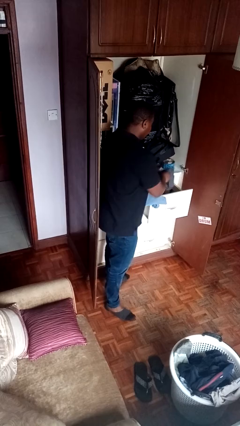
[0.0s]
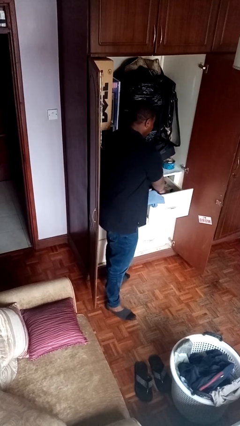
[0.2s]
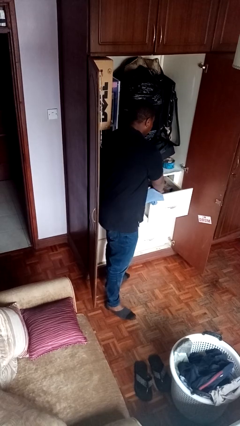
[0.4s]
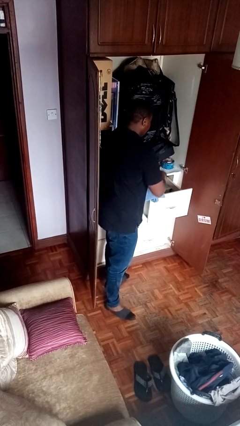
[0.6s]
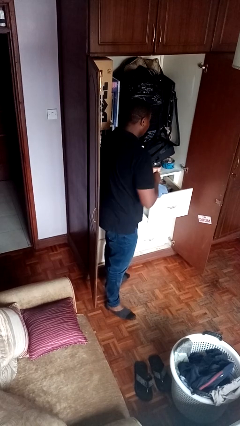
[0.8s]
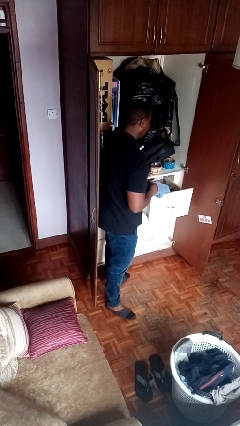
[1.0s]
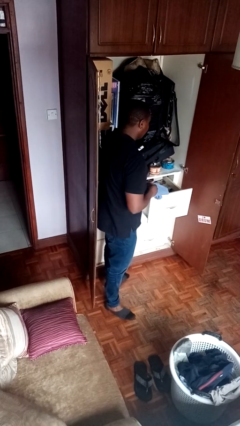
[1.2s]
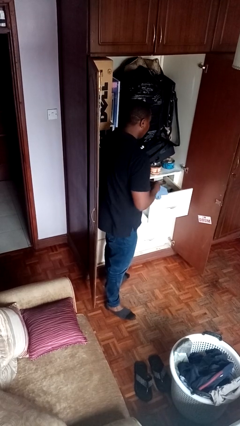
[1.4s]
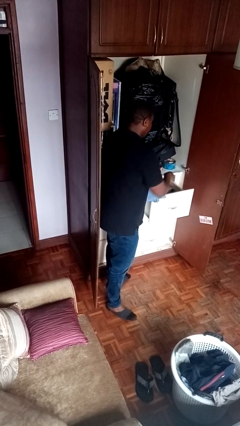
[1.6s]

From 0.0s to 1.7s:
person puts clothes into dresser

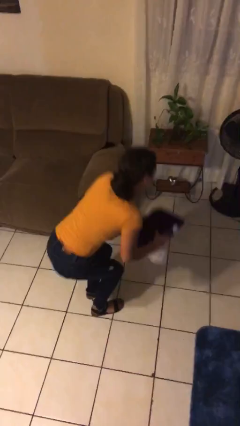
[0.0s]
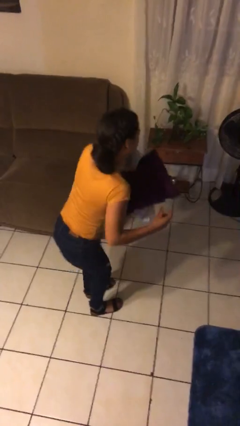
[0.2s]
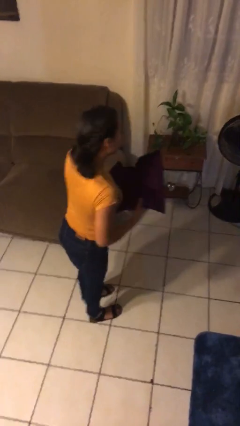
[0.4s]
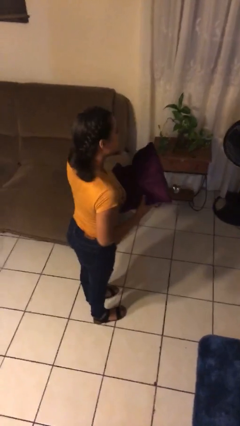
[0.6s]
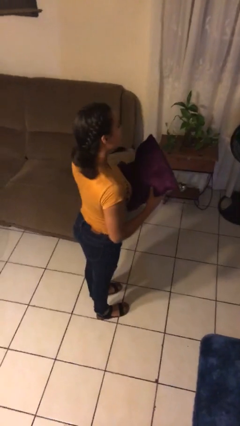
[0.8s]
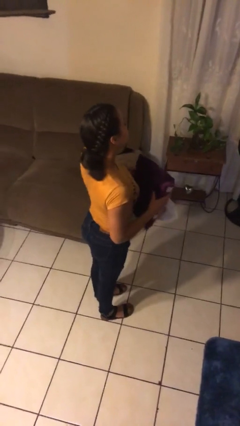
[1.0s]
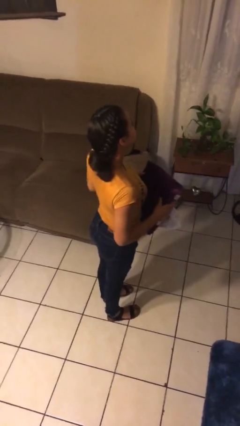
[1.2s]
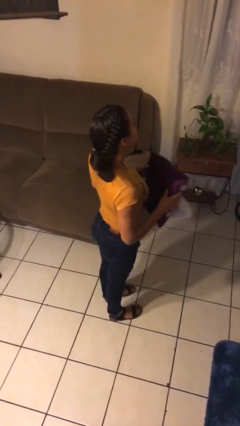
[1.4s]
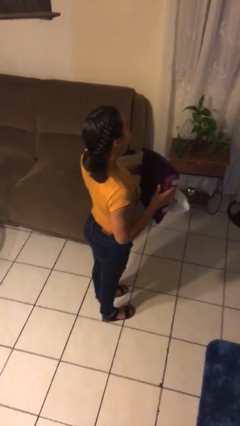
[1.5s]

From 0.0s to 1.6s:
person picks up object from floor

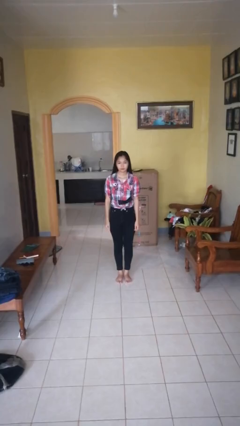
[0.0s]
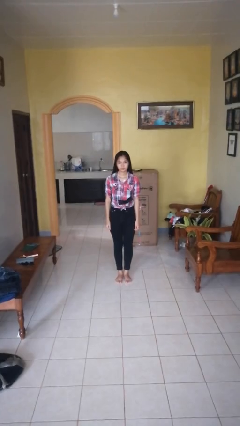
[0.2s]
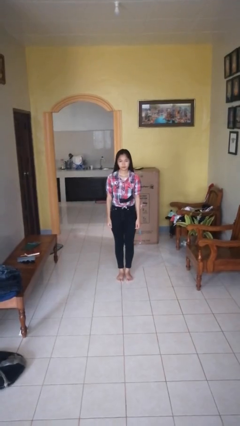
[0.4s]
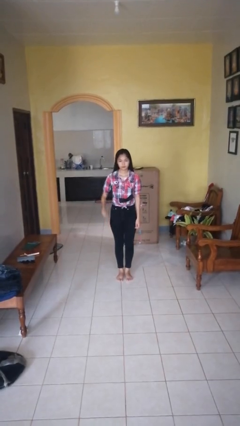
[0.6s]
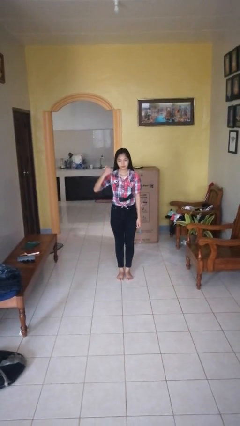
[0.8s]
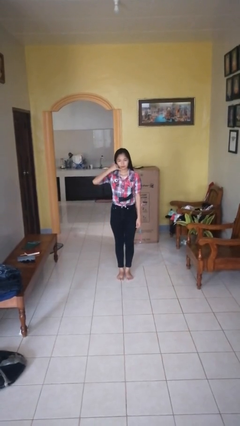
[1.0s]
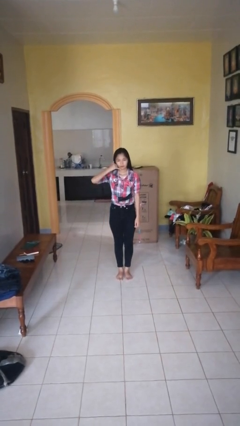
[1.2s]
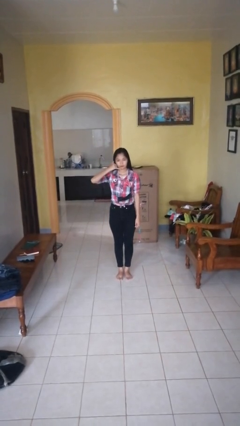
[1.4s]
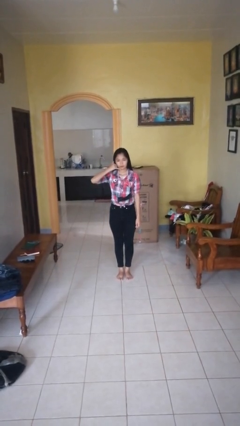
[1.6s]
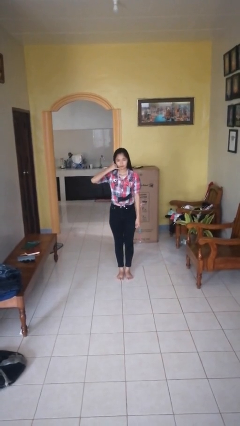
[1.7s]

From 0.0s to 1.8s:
person gestures call me

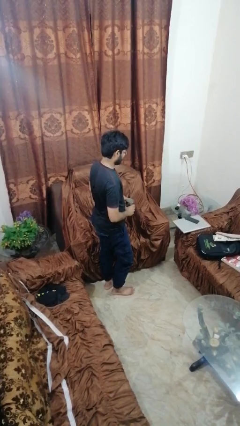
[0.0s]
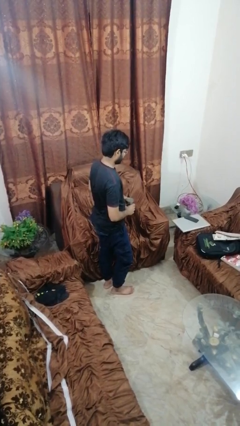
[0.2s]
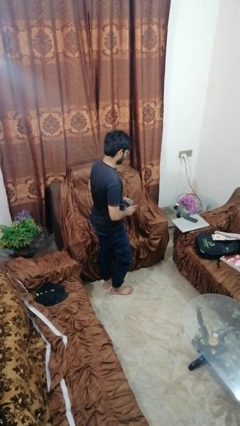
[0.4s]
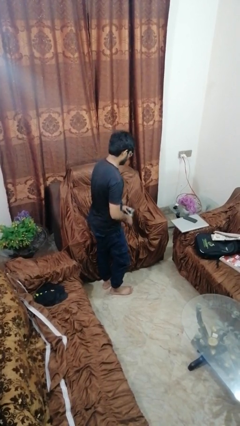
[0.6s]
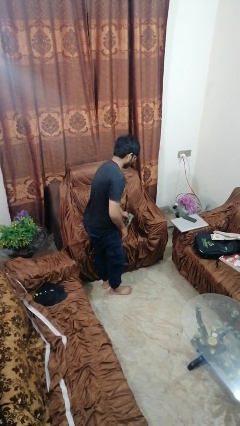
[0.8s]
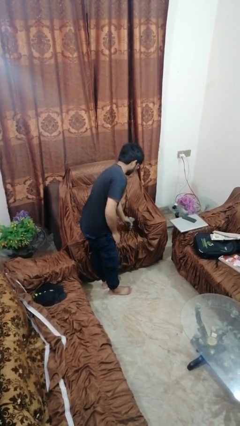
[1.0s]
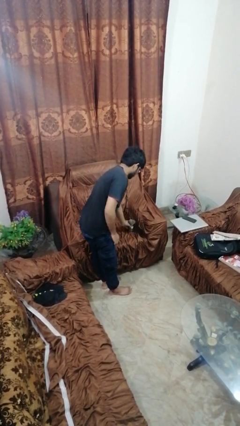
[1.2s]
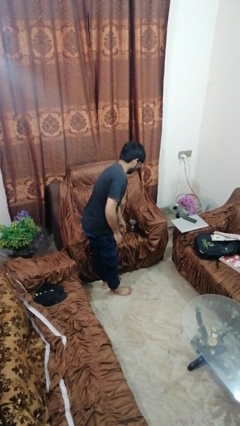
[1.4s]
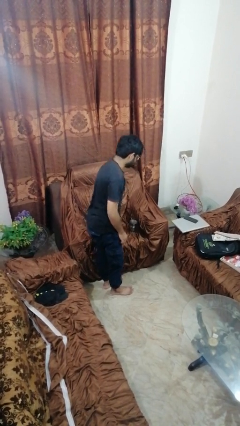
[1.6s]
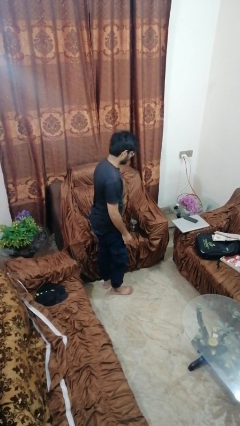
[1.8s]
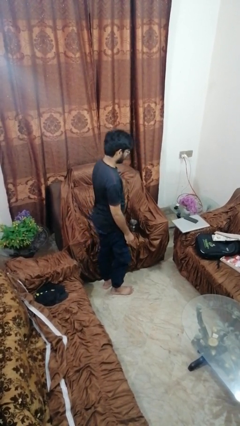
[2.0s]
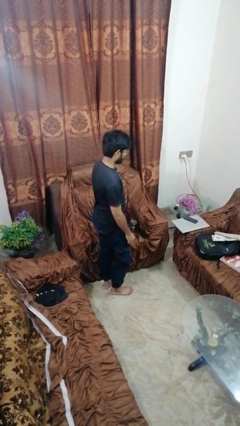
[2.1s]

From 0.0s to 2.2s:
person puts down object on couch

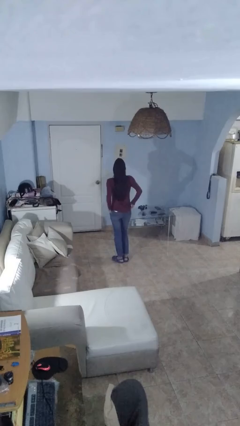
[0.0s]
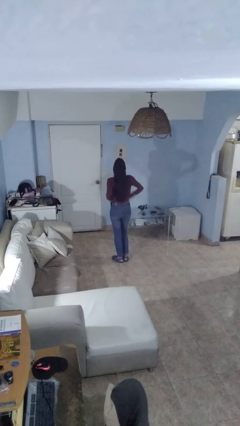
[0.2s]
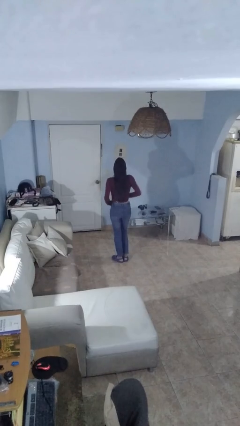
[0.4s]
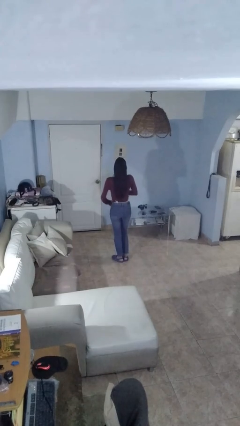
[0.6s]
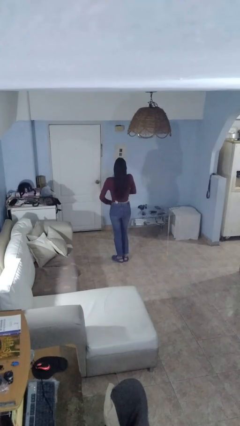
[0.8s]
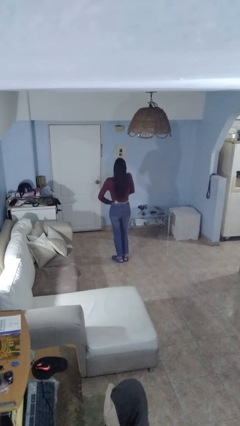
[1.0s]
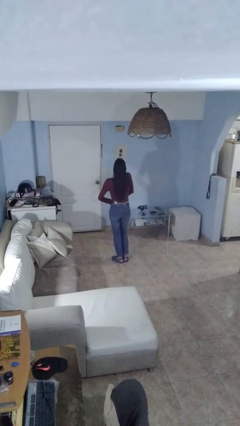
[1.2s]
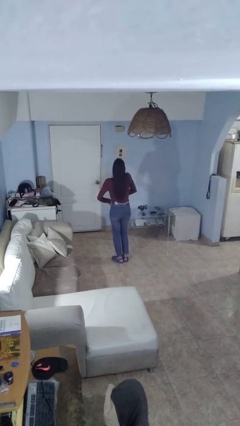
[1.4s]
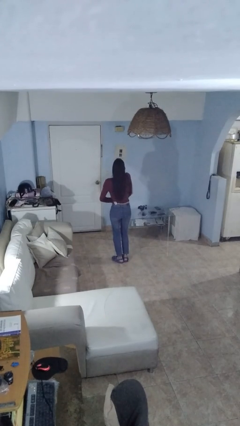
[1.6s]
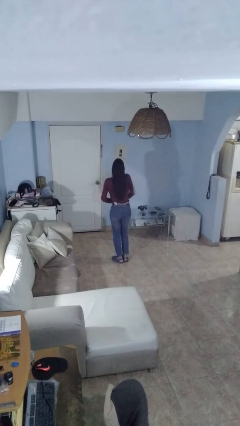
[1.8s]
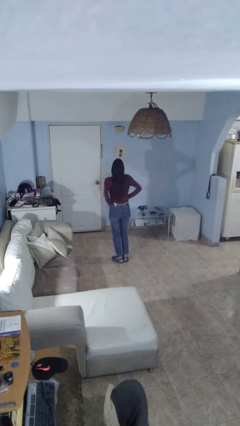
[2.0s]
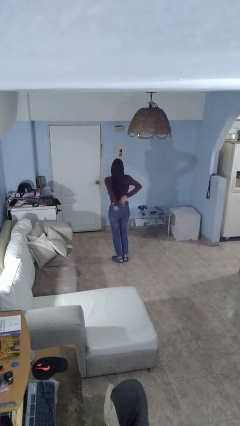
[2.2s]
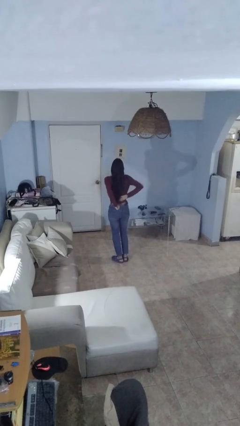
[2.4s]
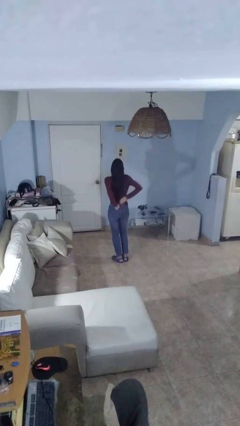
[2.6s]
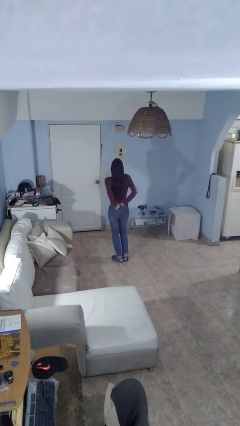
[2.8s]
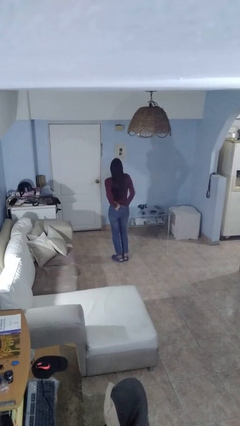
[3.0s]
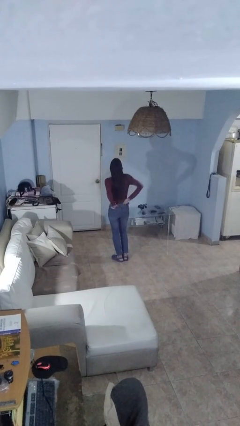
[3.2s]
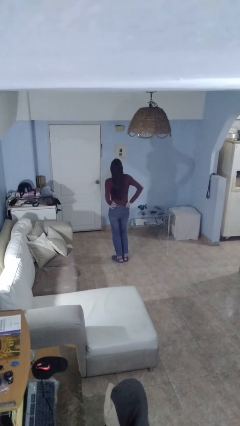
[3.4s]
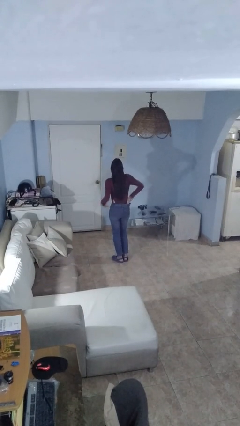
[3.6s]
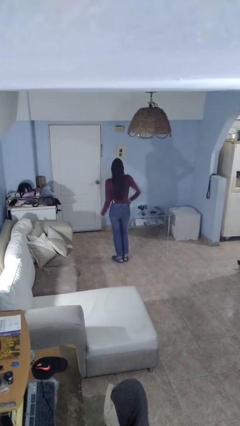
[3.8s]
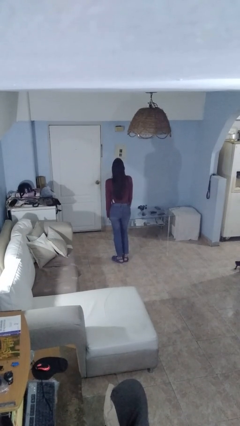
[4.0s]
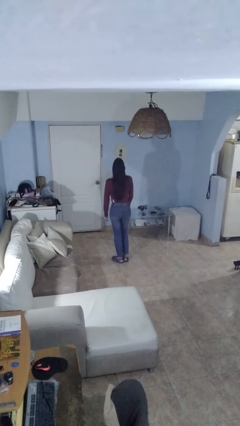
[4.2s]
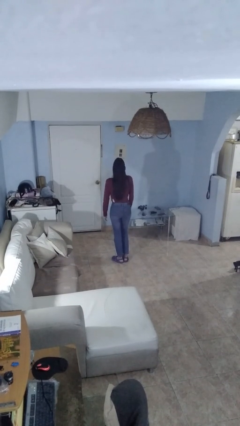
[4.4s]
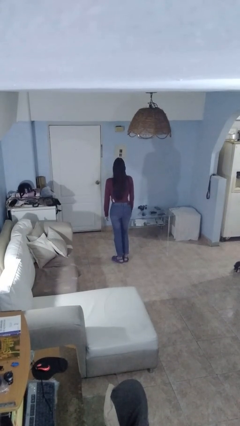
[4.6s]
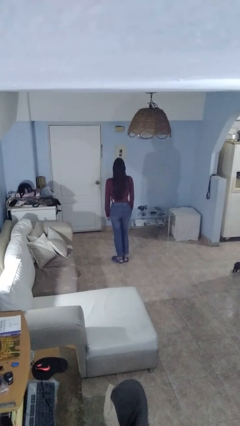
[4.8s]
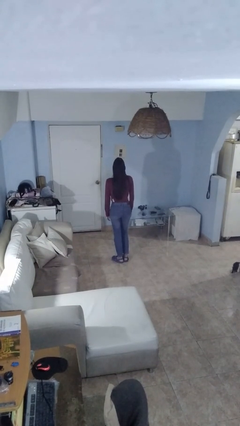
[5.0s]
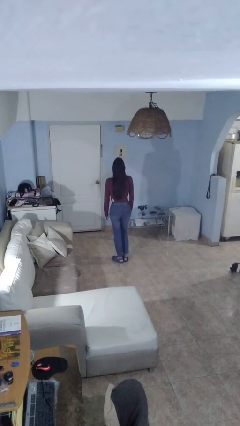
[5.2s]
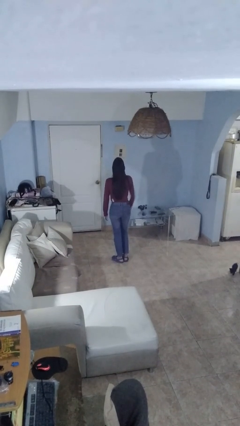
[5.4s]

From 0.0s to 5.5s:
person tucks in shirt

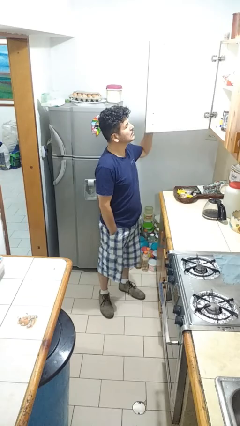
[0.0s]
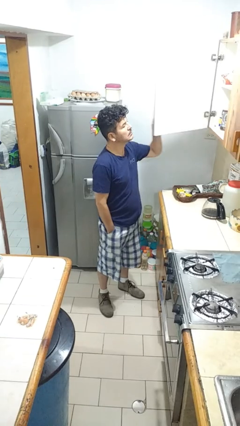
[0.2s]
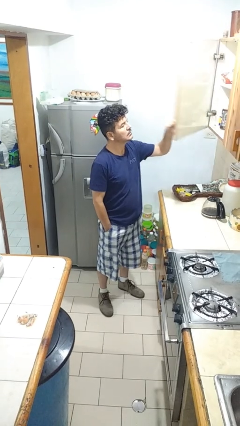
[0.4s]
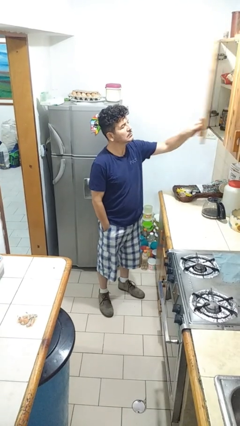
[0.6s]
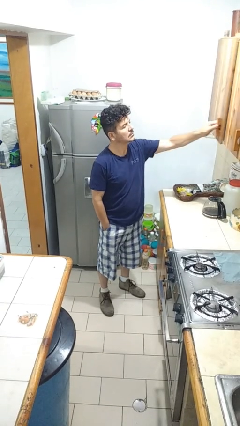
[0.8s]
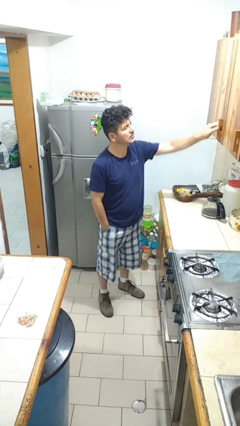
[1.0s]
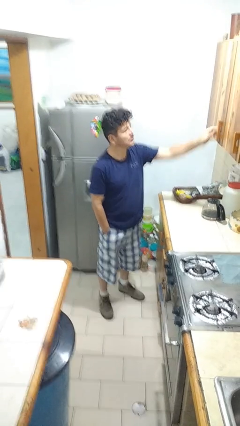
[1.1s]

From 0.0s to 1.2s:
person closes cabinet

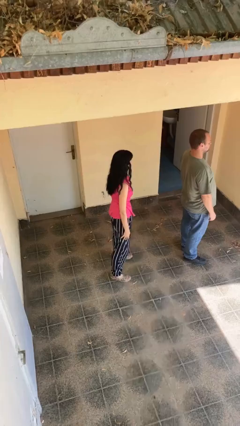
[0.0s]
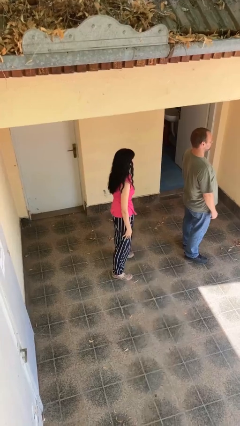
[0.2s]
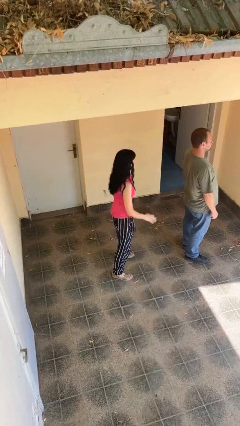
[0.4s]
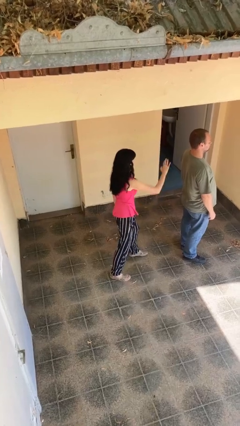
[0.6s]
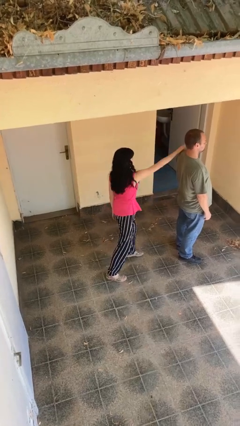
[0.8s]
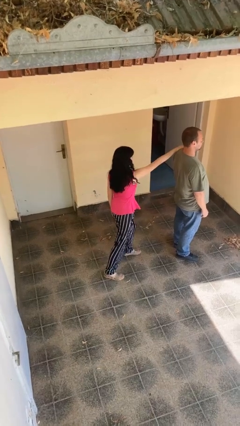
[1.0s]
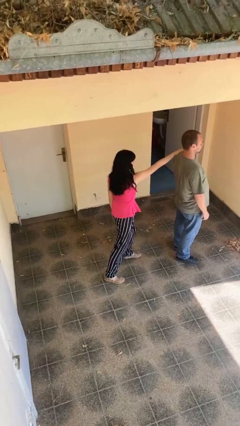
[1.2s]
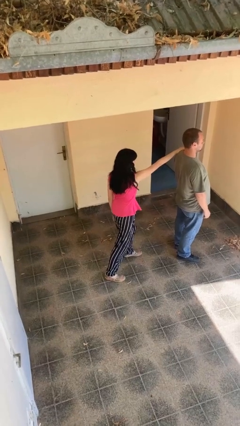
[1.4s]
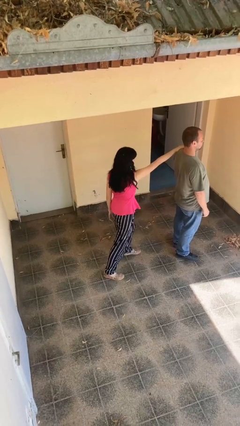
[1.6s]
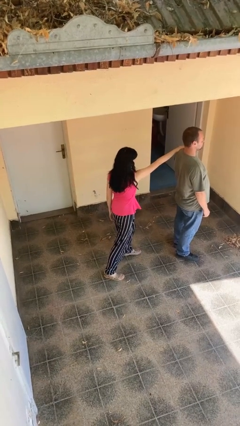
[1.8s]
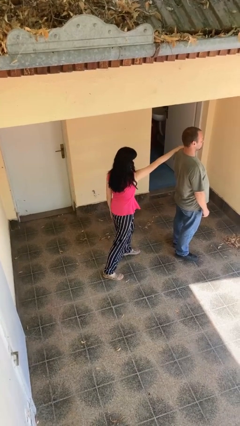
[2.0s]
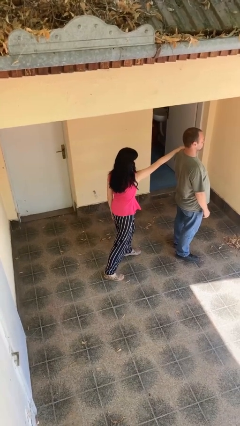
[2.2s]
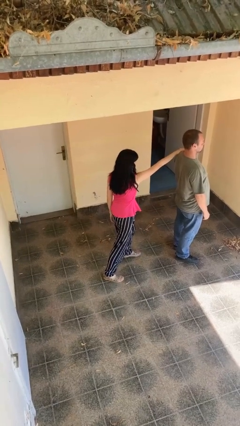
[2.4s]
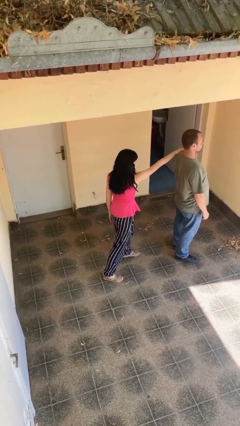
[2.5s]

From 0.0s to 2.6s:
person grabs person by shoulder

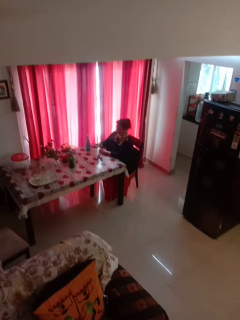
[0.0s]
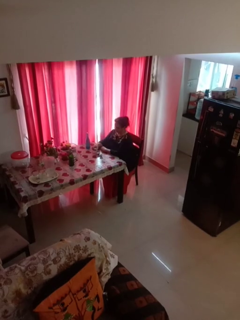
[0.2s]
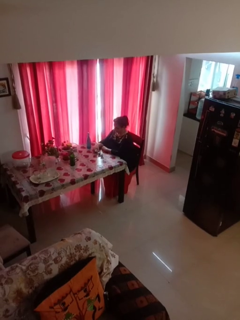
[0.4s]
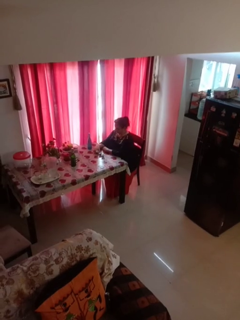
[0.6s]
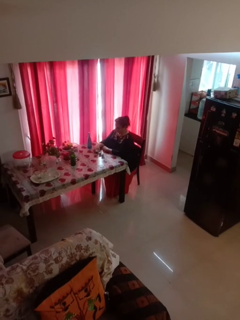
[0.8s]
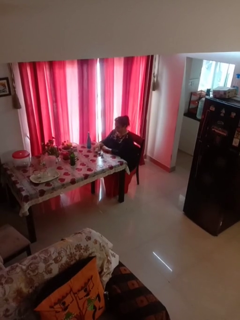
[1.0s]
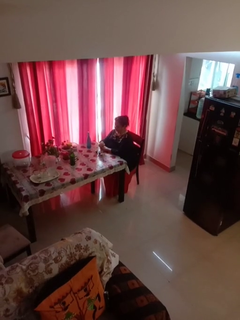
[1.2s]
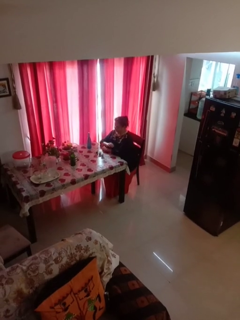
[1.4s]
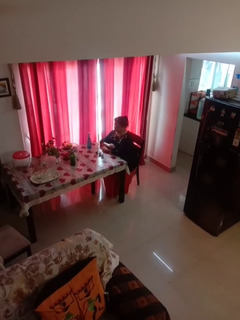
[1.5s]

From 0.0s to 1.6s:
person puts down object on table
